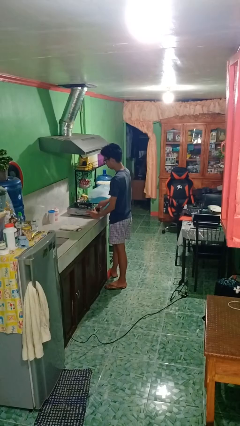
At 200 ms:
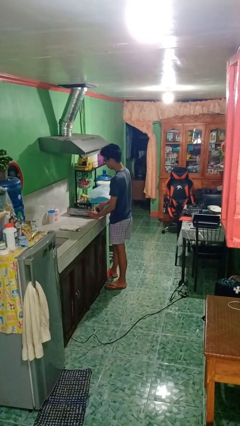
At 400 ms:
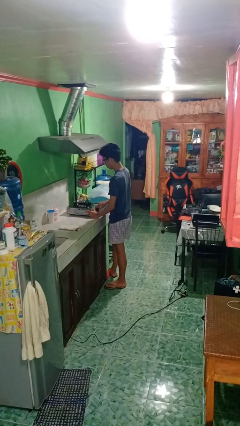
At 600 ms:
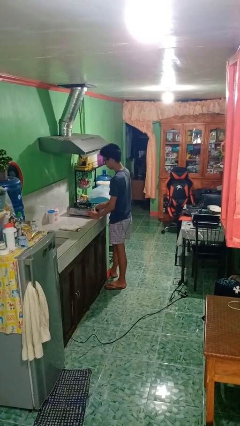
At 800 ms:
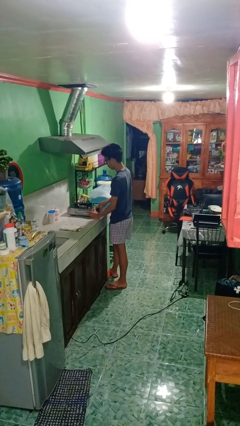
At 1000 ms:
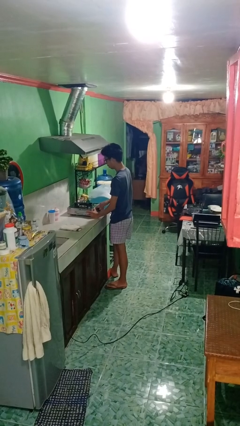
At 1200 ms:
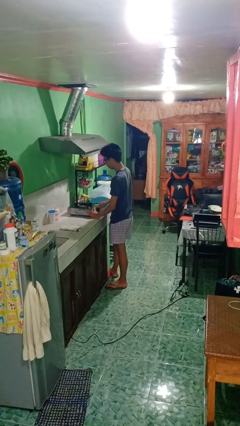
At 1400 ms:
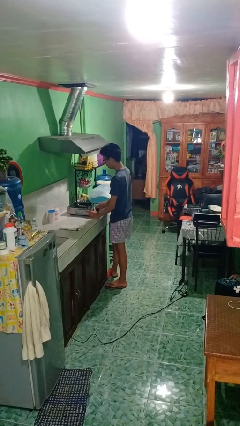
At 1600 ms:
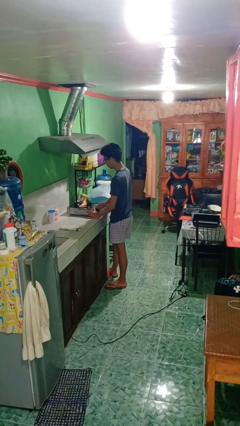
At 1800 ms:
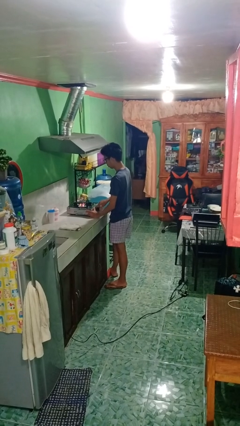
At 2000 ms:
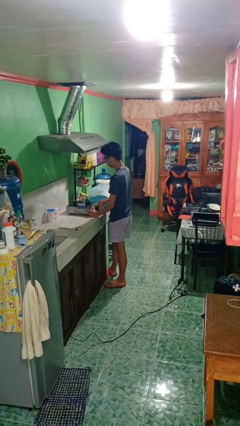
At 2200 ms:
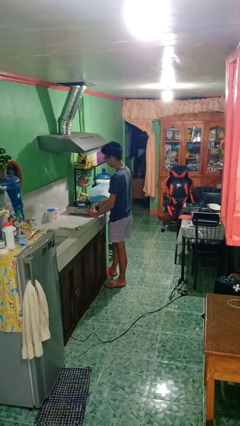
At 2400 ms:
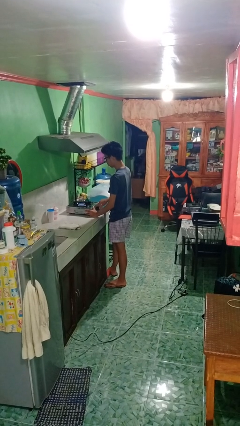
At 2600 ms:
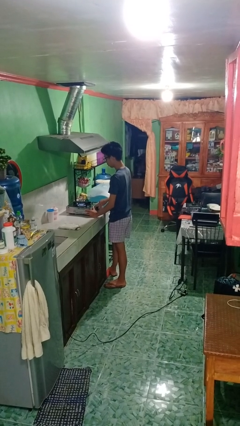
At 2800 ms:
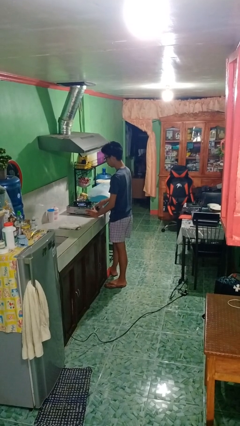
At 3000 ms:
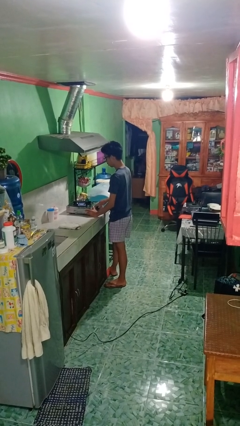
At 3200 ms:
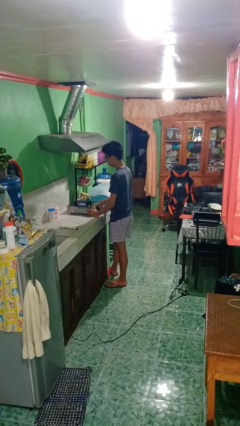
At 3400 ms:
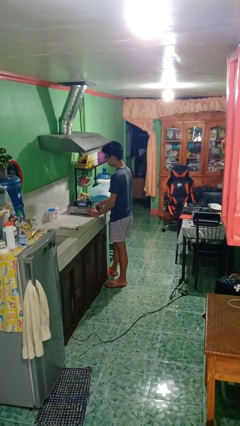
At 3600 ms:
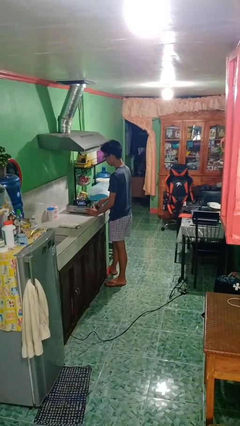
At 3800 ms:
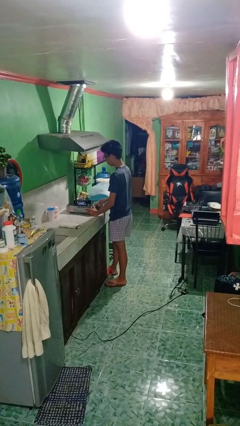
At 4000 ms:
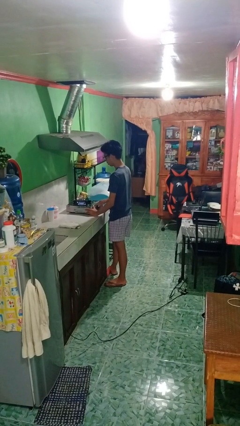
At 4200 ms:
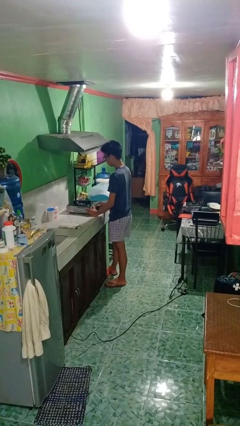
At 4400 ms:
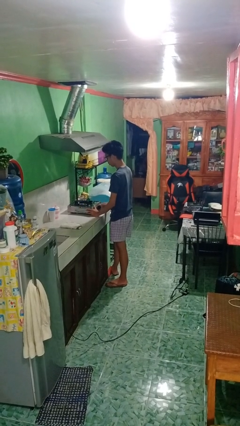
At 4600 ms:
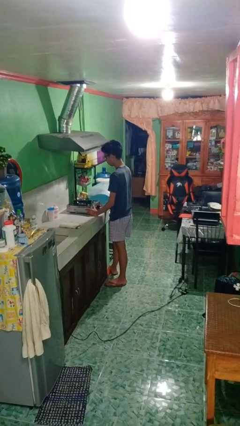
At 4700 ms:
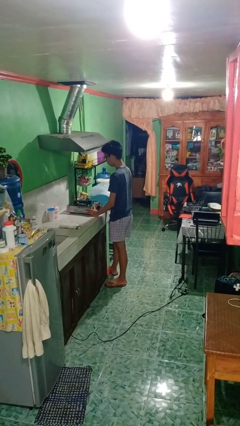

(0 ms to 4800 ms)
person turns on stovetop

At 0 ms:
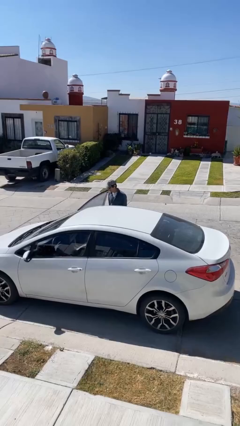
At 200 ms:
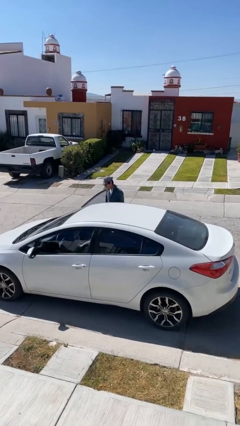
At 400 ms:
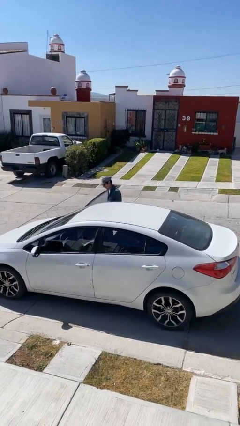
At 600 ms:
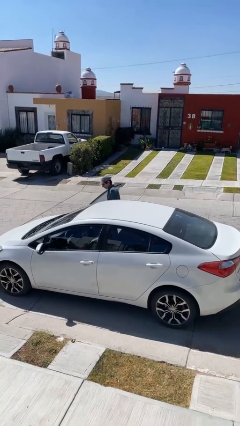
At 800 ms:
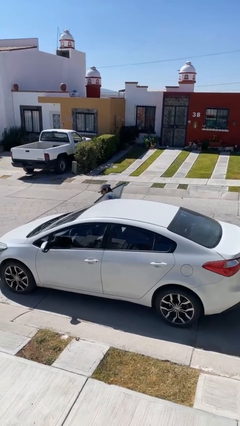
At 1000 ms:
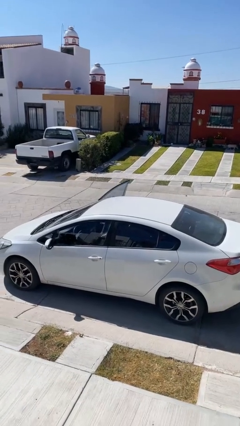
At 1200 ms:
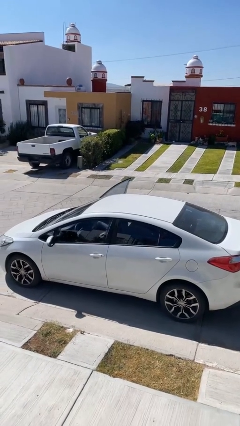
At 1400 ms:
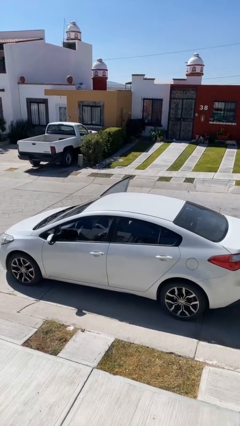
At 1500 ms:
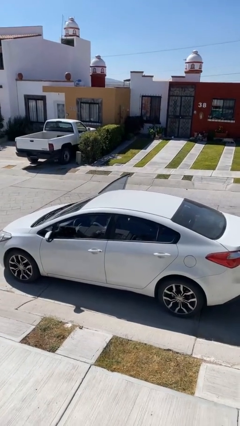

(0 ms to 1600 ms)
person enters car

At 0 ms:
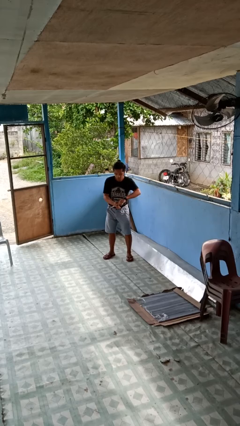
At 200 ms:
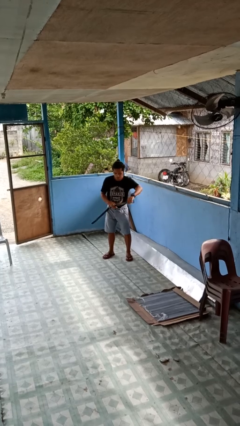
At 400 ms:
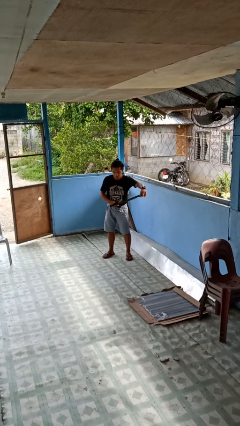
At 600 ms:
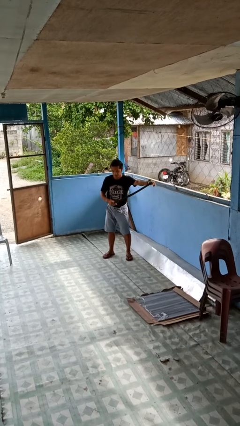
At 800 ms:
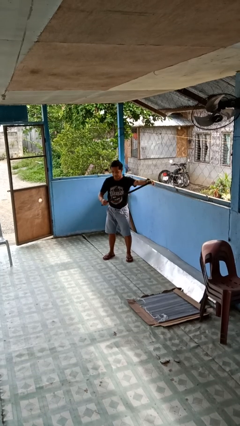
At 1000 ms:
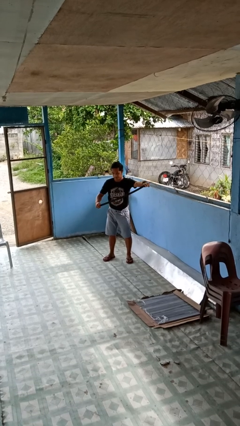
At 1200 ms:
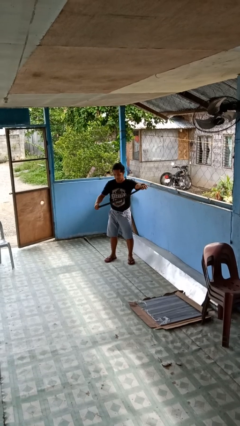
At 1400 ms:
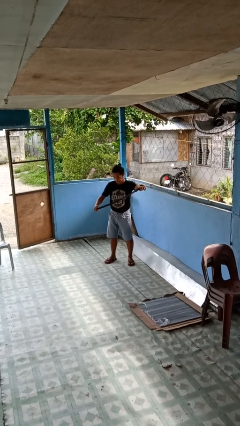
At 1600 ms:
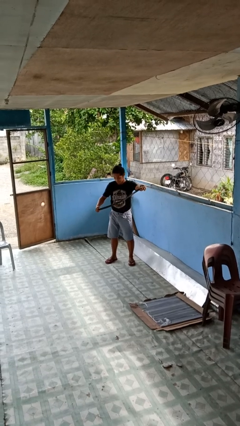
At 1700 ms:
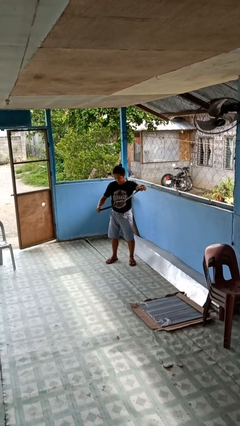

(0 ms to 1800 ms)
person takes off belt

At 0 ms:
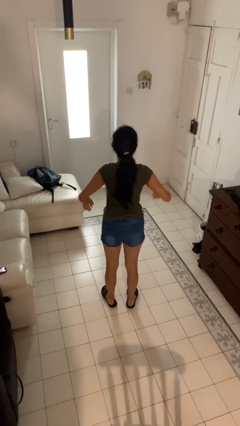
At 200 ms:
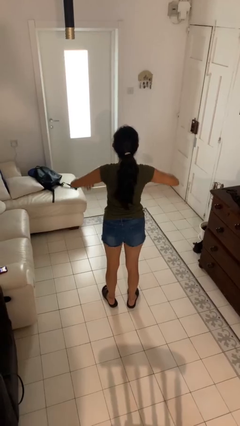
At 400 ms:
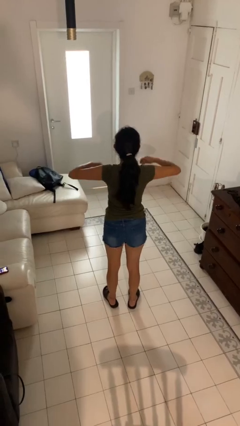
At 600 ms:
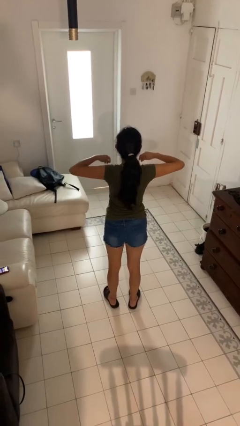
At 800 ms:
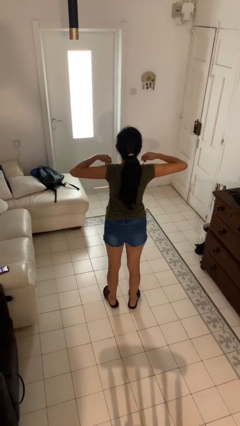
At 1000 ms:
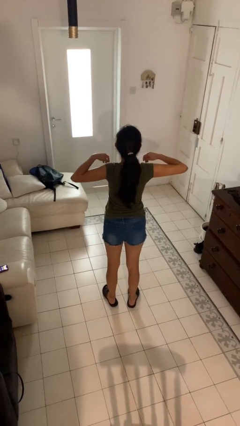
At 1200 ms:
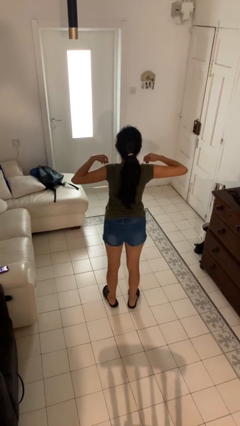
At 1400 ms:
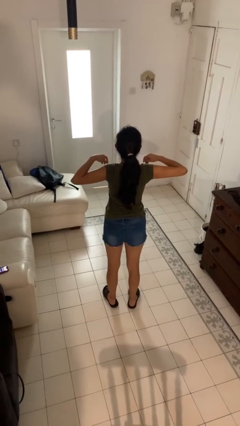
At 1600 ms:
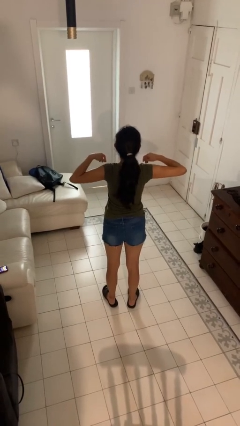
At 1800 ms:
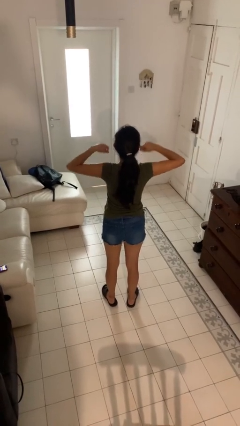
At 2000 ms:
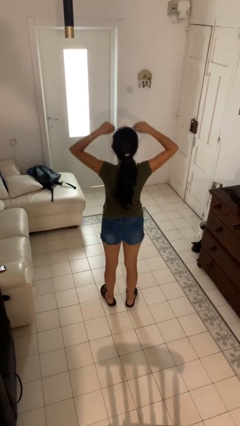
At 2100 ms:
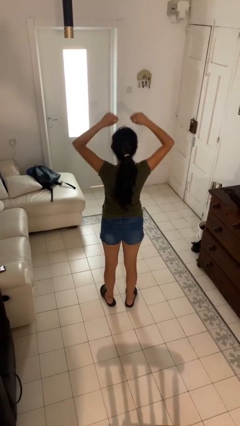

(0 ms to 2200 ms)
person stretches arms to side

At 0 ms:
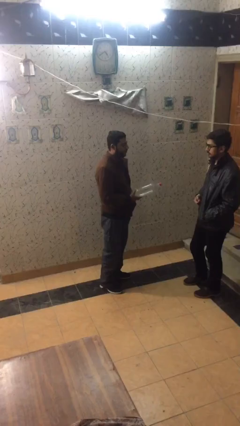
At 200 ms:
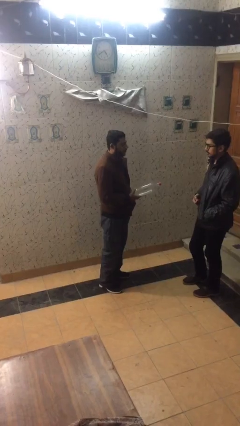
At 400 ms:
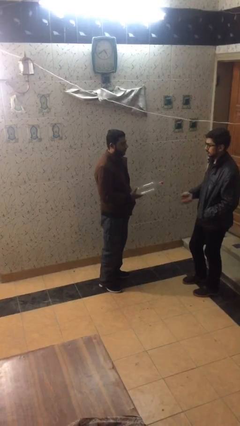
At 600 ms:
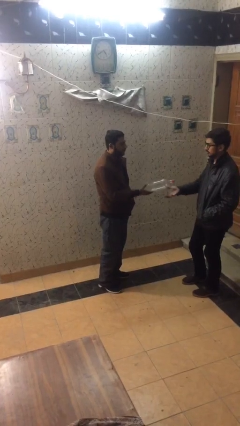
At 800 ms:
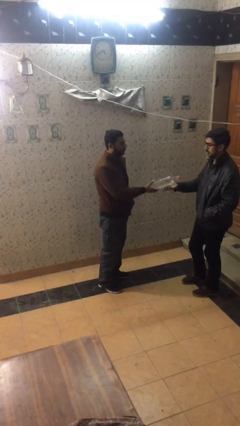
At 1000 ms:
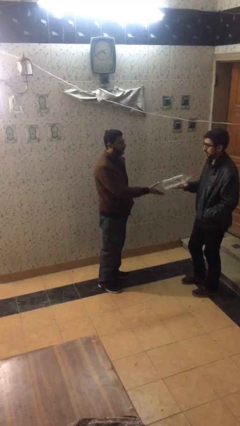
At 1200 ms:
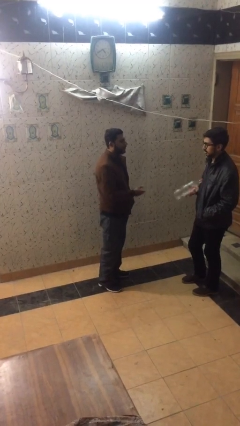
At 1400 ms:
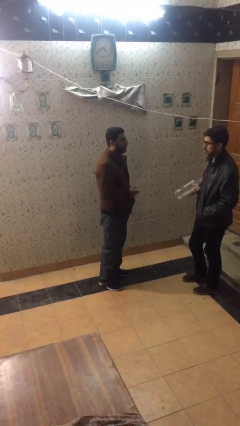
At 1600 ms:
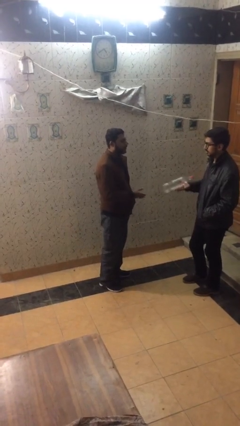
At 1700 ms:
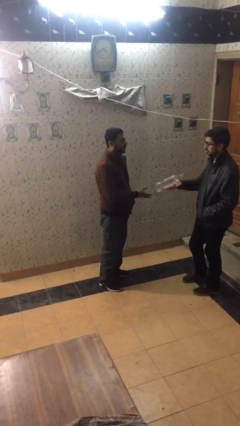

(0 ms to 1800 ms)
person transfers object to person

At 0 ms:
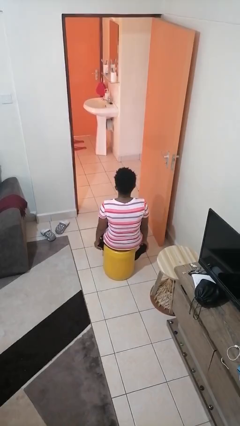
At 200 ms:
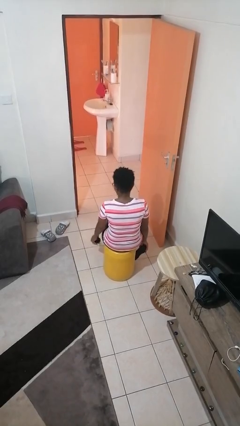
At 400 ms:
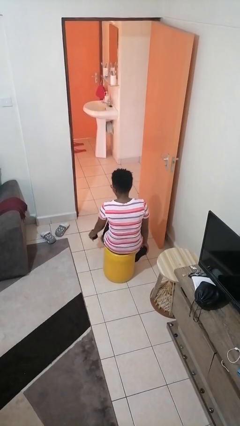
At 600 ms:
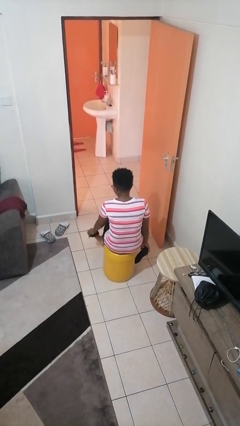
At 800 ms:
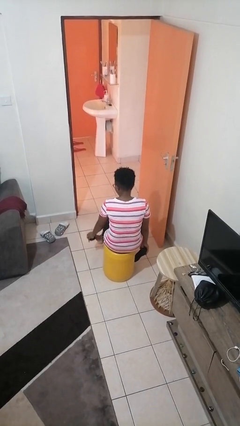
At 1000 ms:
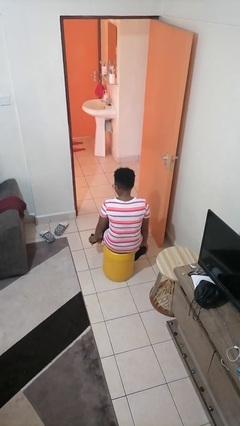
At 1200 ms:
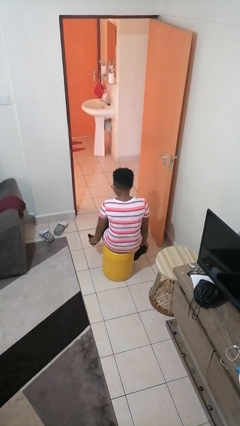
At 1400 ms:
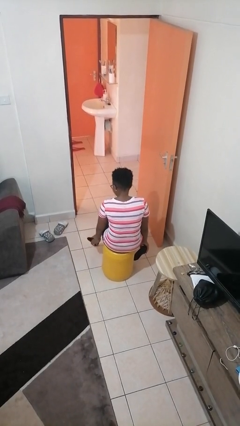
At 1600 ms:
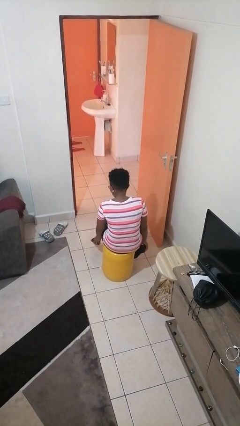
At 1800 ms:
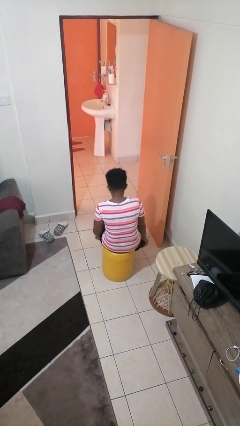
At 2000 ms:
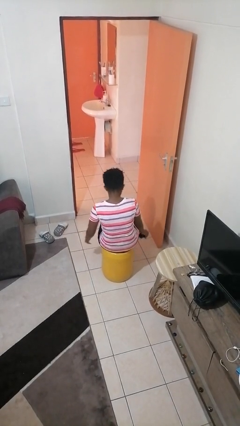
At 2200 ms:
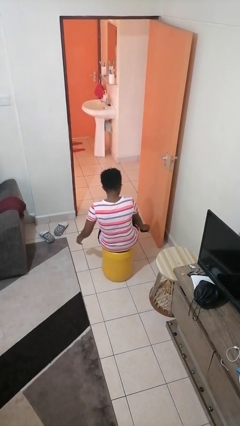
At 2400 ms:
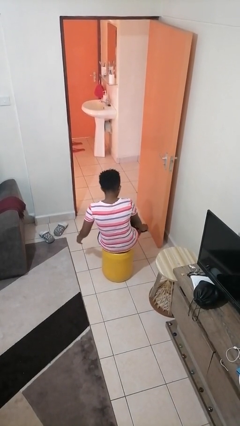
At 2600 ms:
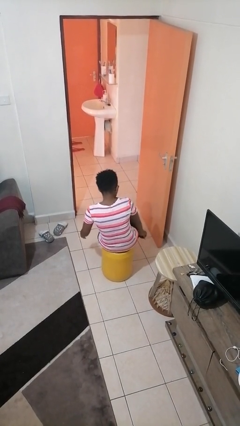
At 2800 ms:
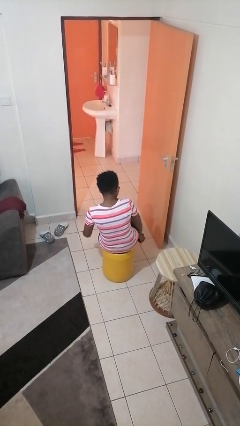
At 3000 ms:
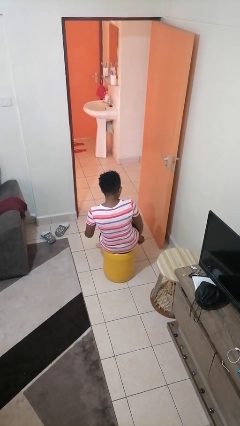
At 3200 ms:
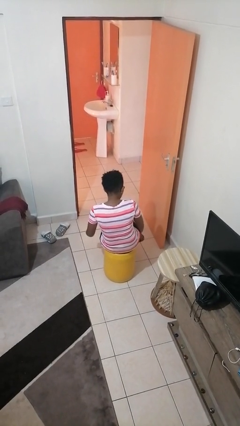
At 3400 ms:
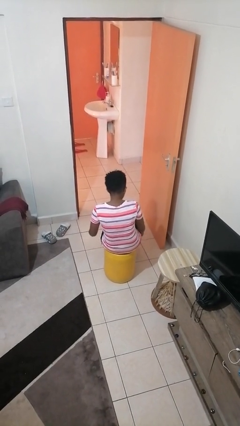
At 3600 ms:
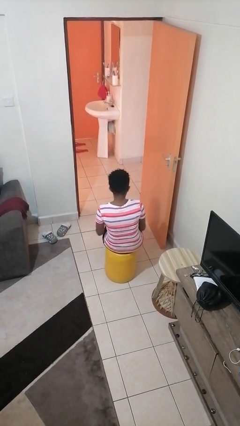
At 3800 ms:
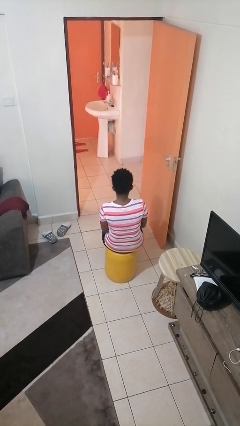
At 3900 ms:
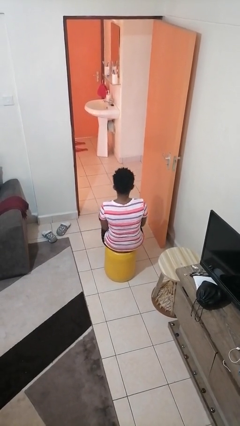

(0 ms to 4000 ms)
person puts on shoes

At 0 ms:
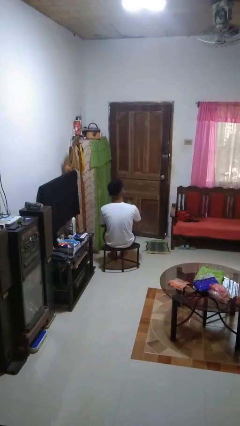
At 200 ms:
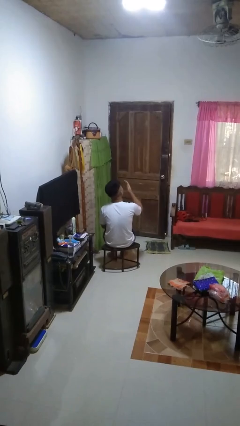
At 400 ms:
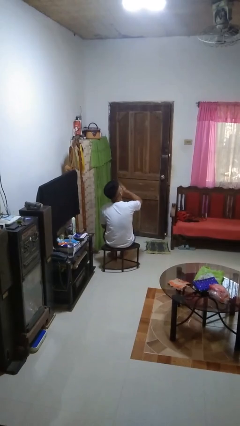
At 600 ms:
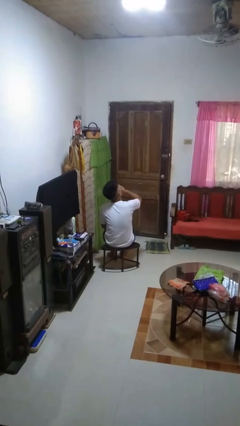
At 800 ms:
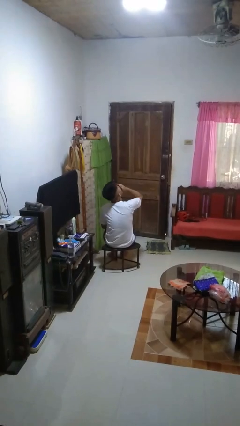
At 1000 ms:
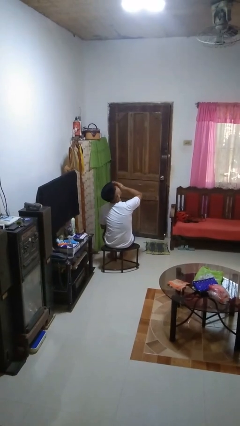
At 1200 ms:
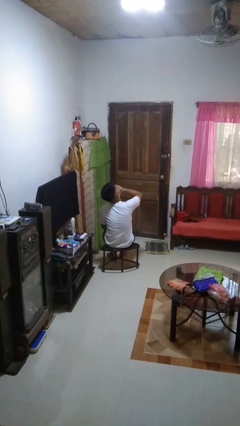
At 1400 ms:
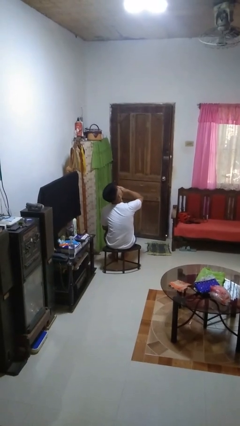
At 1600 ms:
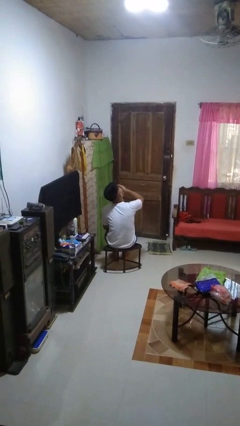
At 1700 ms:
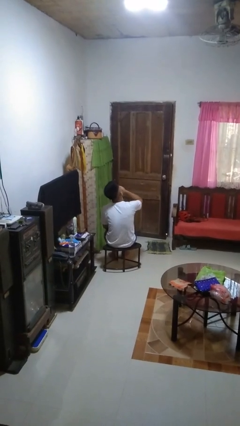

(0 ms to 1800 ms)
person yawns
